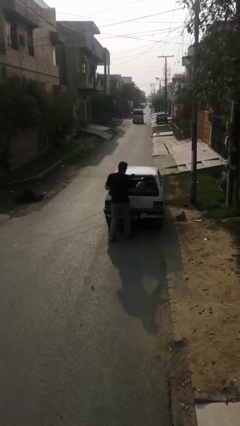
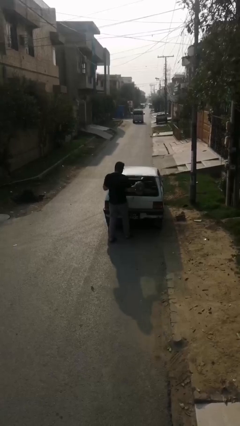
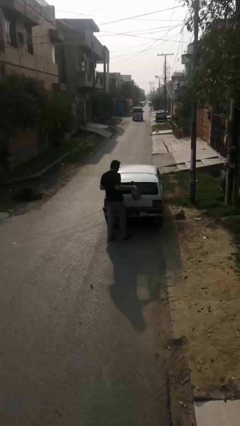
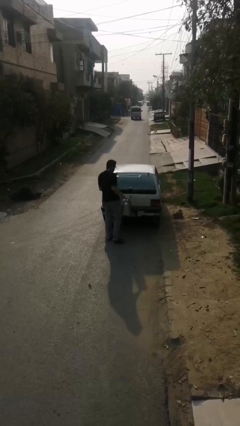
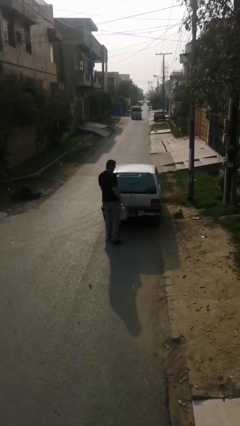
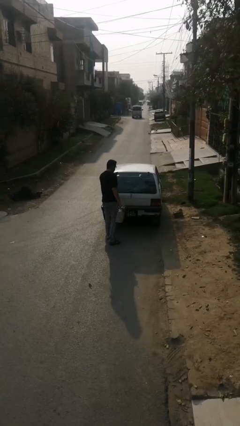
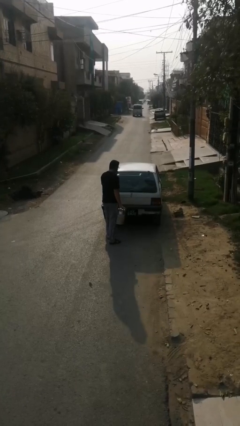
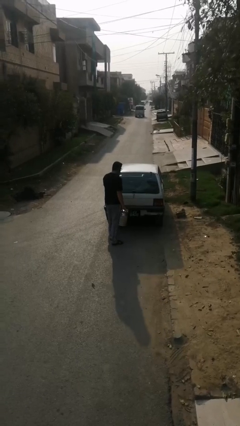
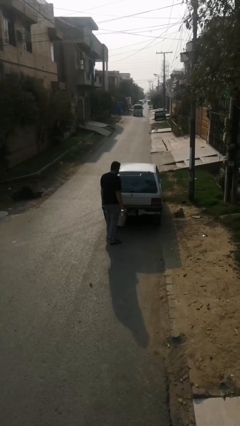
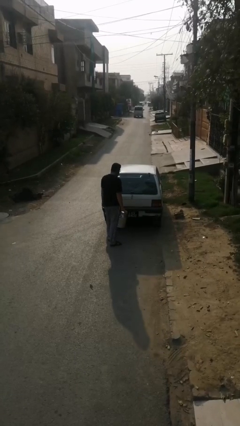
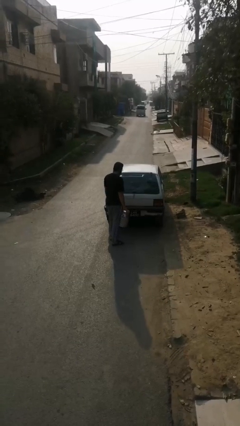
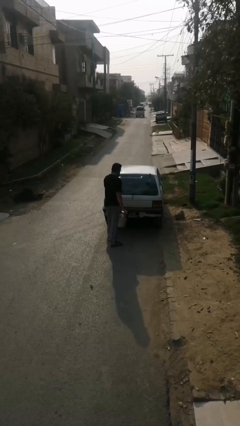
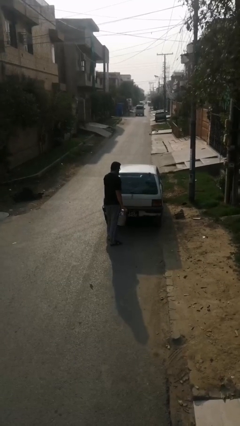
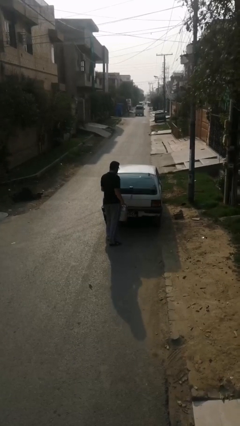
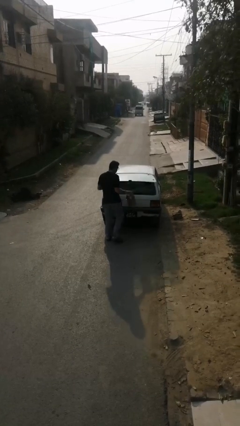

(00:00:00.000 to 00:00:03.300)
person unloads car

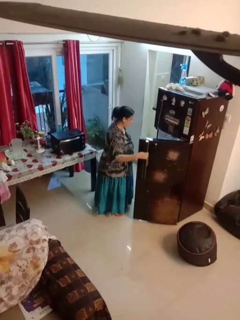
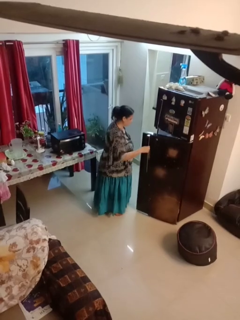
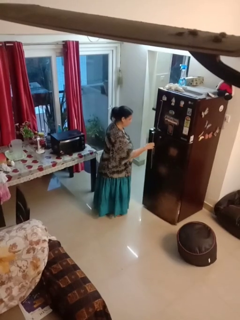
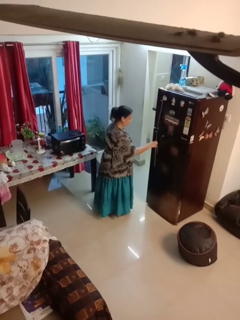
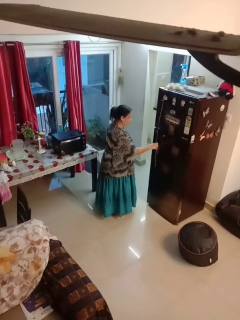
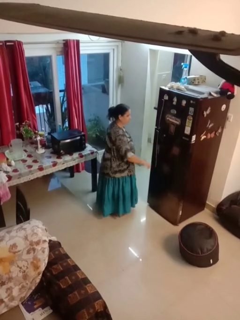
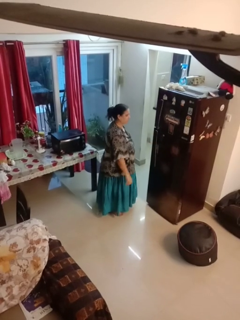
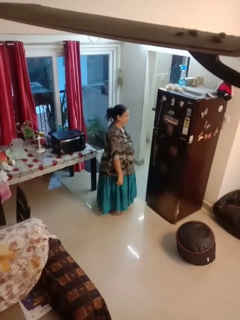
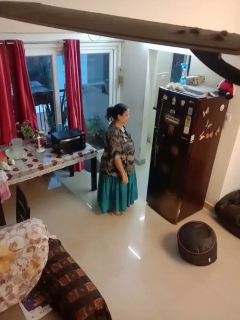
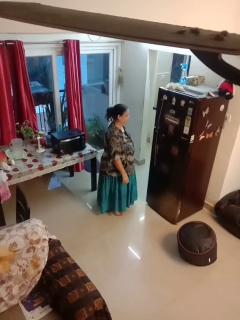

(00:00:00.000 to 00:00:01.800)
person closes refrigerator

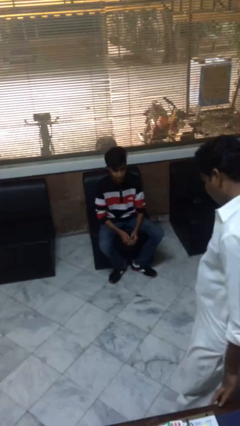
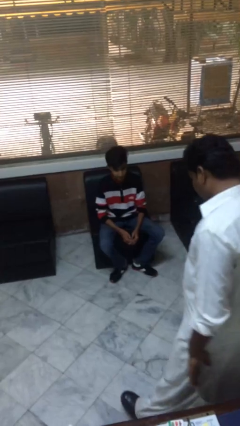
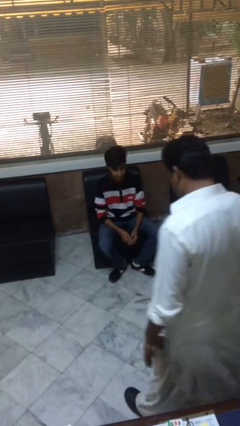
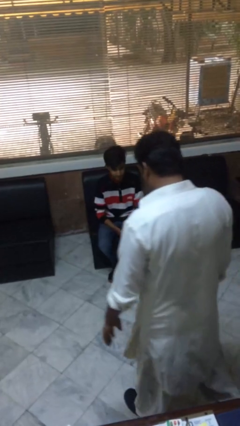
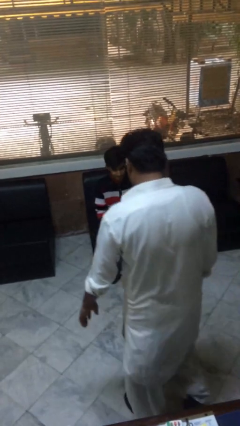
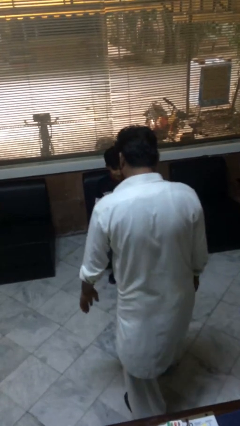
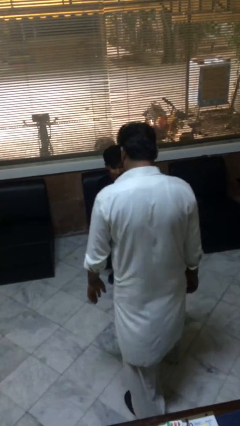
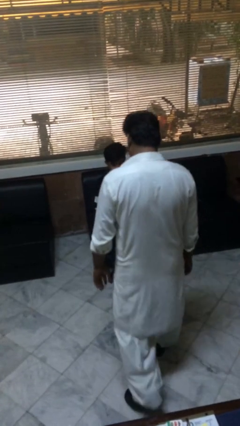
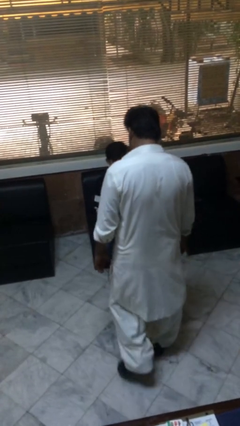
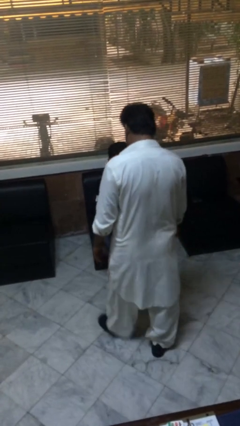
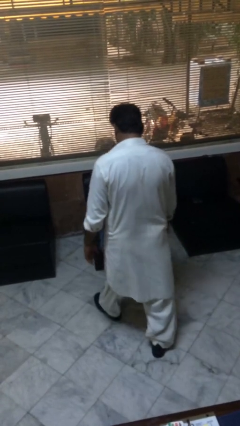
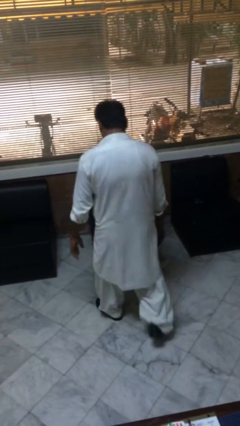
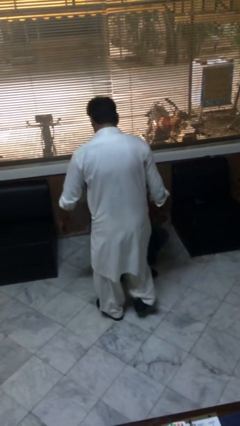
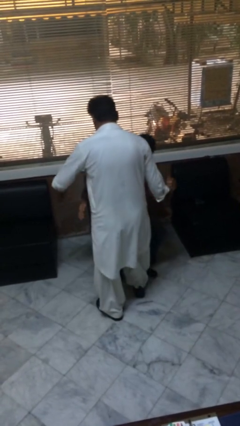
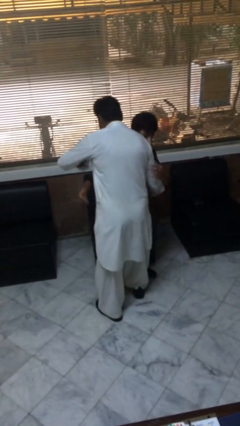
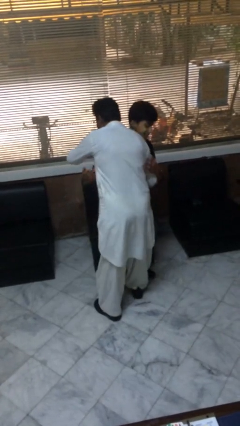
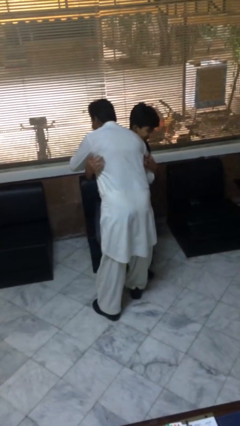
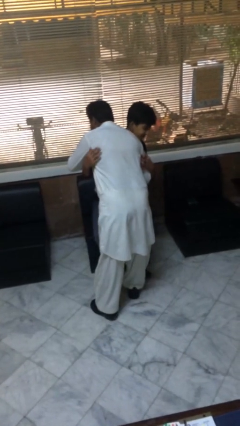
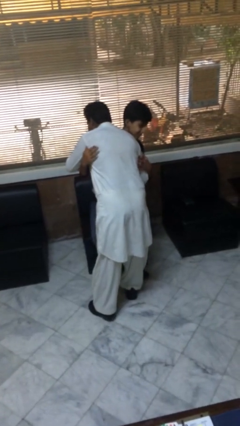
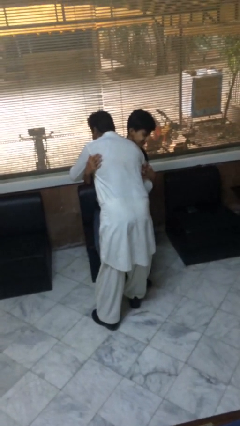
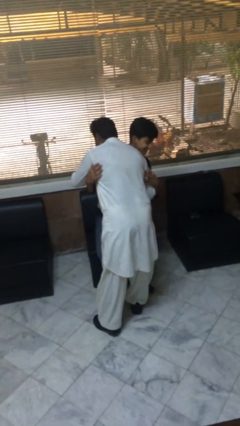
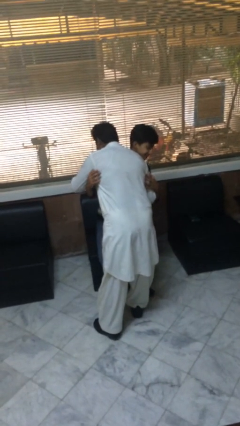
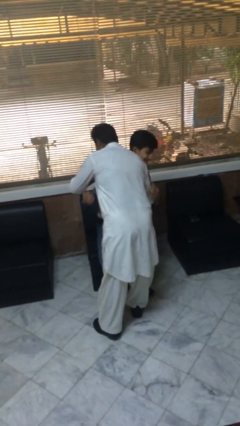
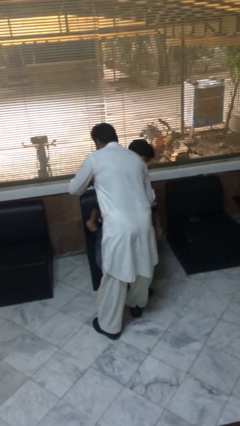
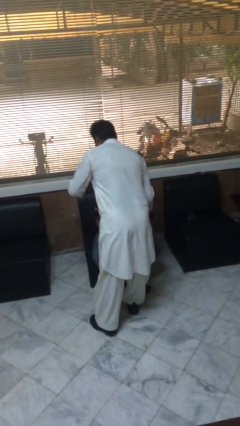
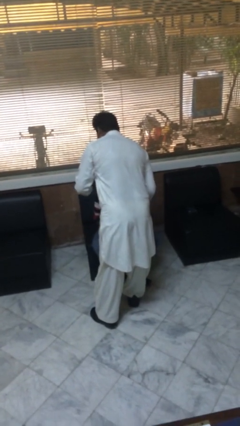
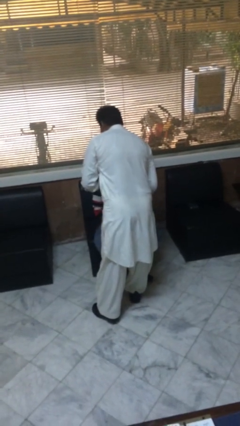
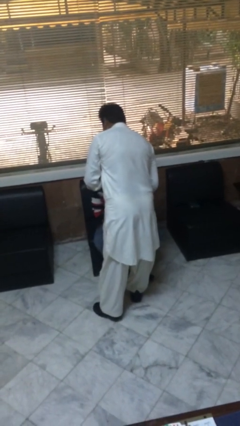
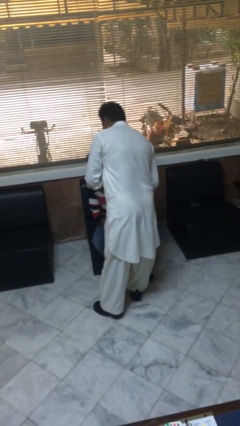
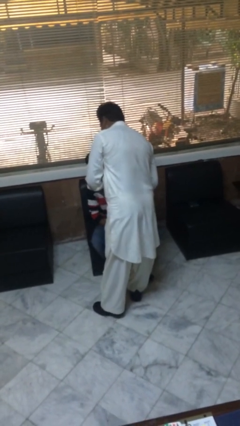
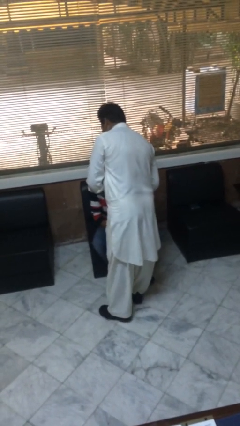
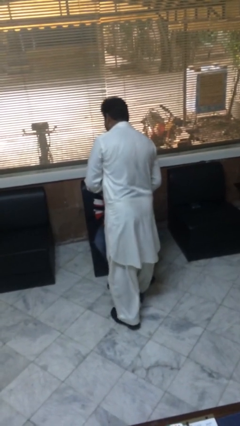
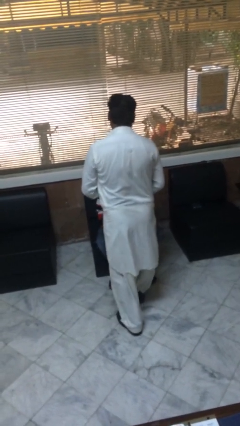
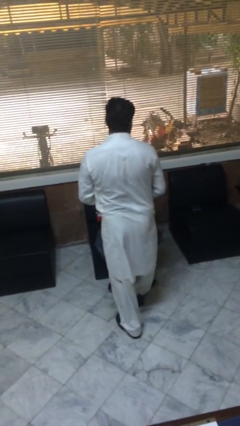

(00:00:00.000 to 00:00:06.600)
person embraces person

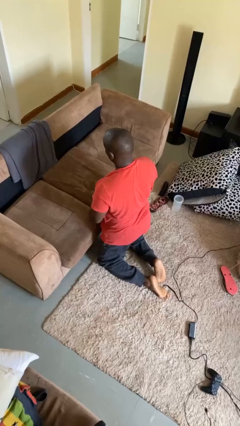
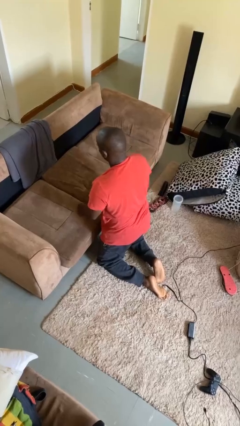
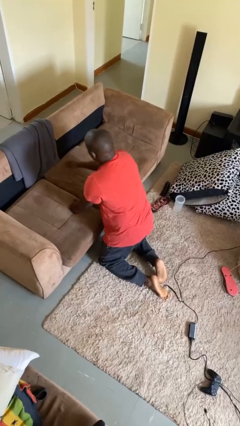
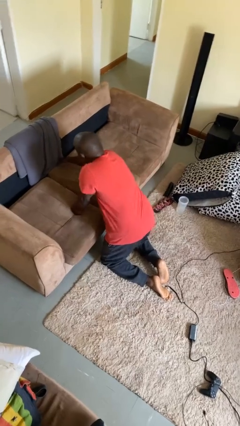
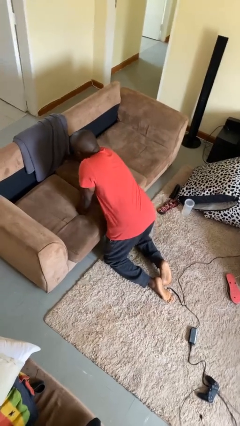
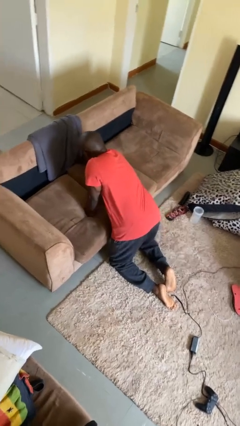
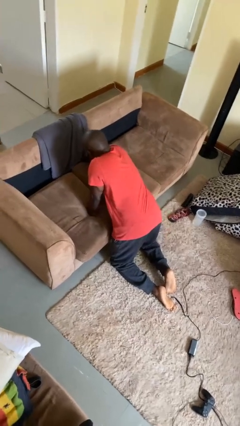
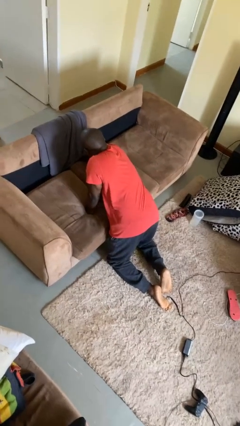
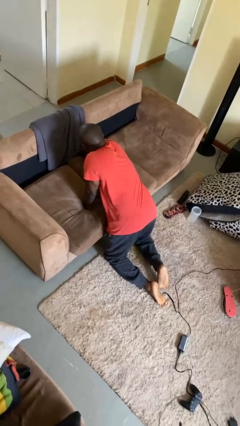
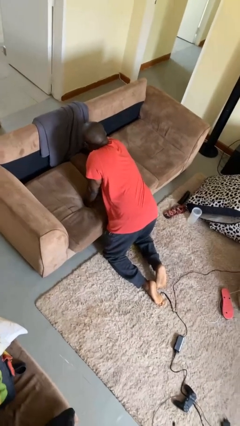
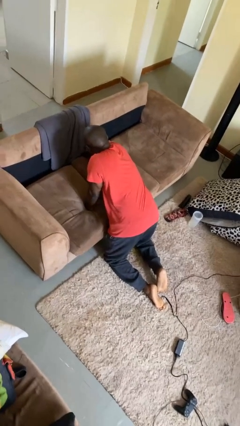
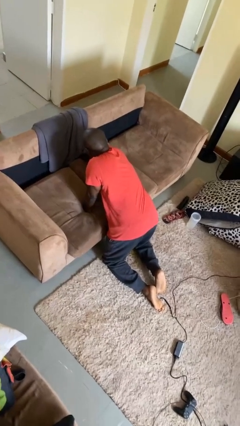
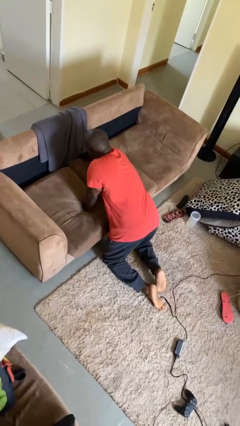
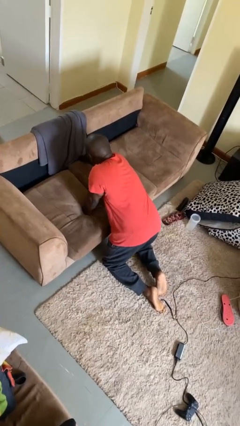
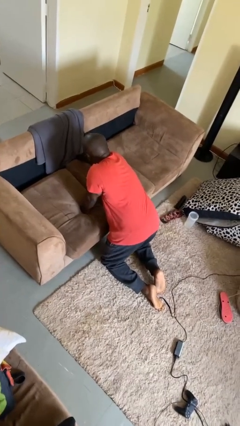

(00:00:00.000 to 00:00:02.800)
person searches in couch

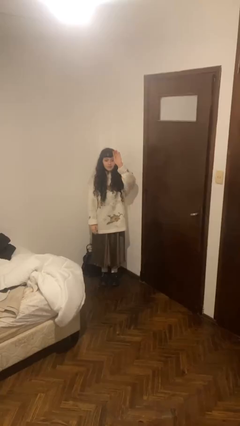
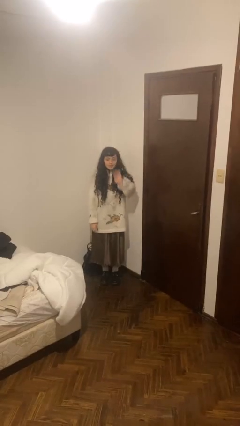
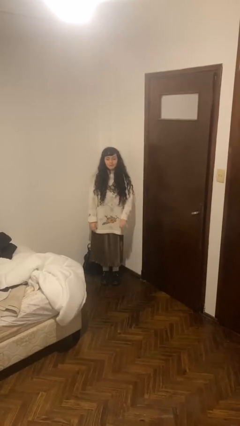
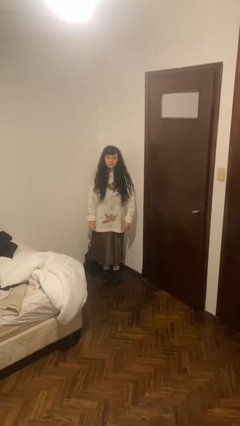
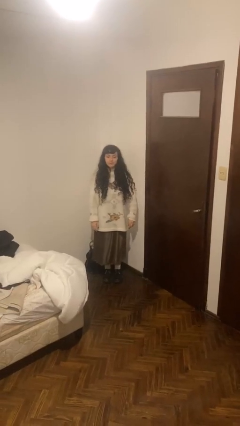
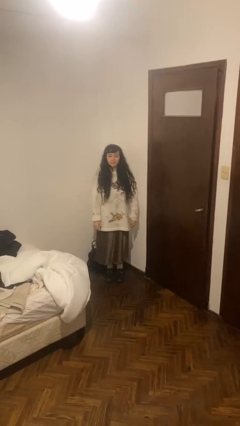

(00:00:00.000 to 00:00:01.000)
person gestures swipe down

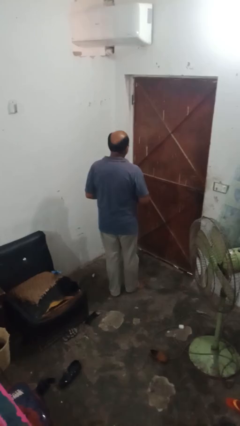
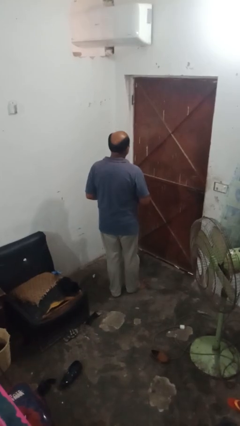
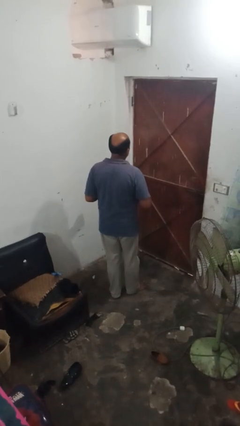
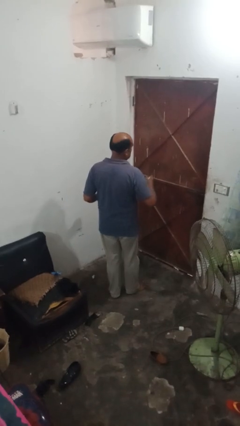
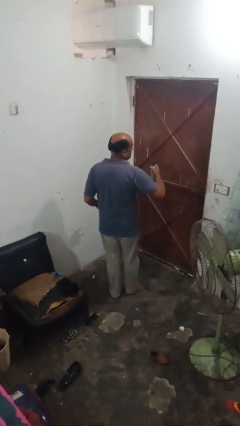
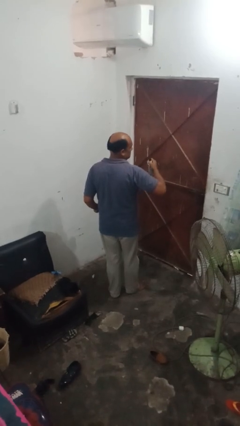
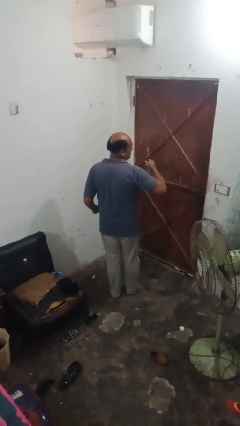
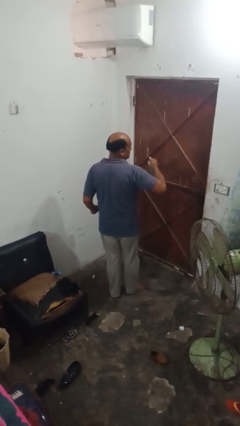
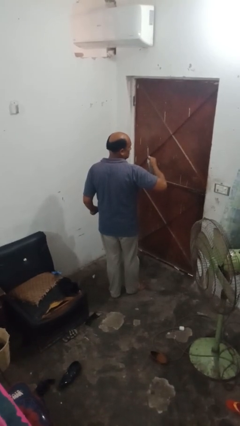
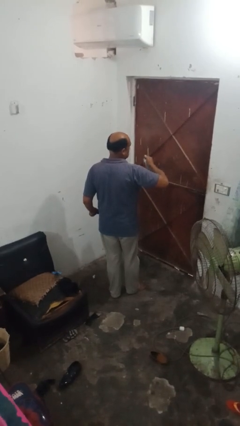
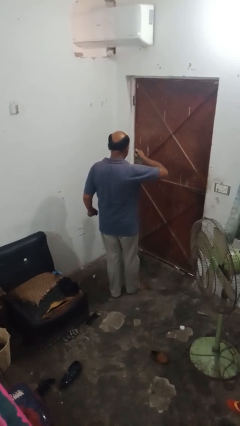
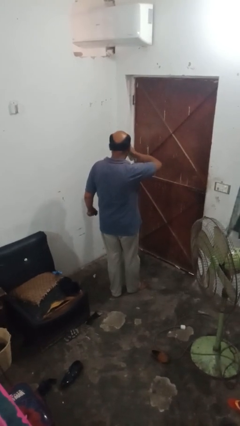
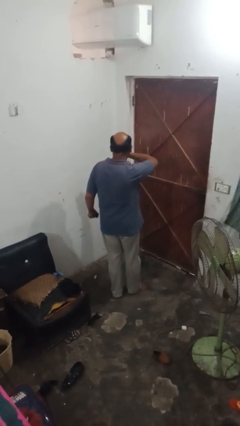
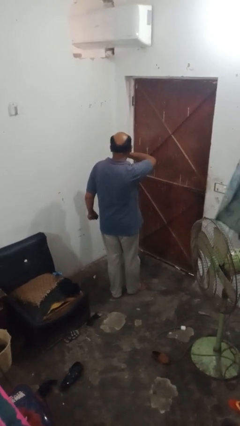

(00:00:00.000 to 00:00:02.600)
person applies deodorant
